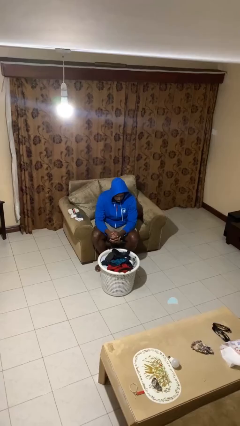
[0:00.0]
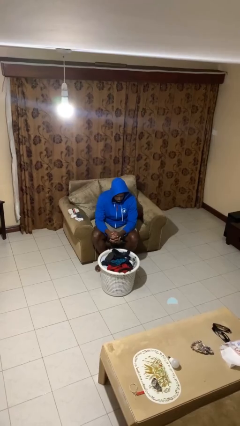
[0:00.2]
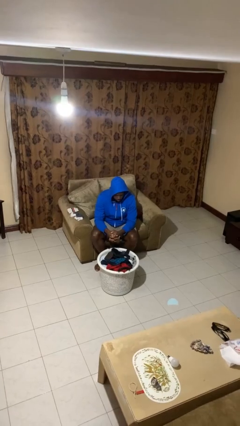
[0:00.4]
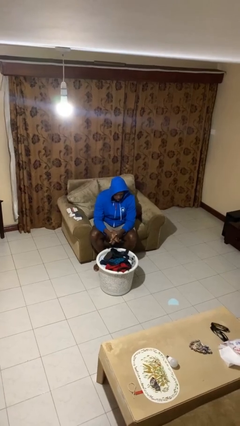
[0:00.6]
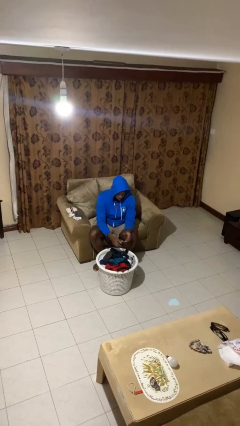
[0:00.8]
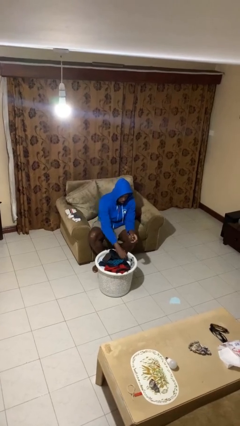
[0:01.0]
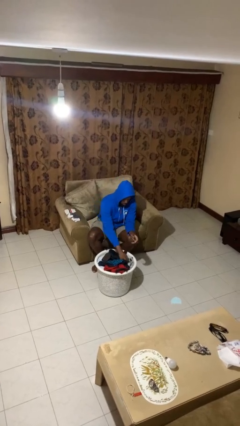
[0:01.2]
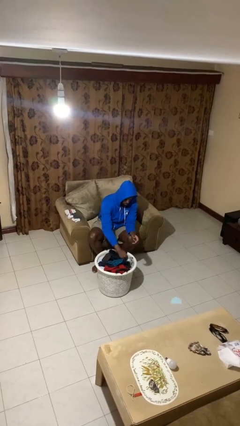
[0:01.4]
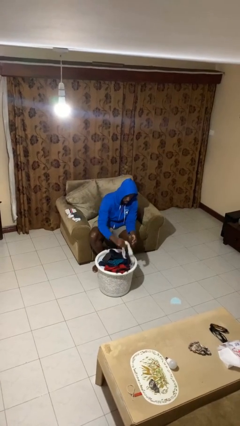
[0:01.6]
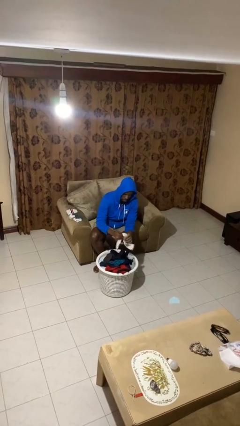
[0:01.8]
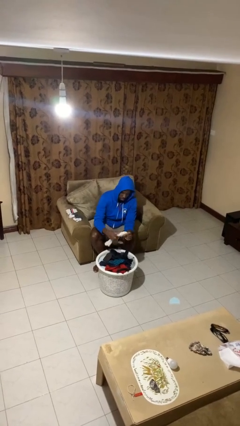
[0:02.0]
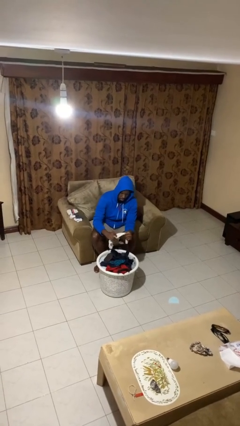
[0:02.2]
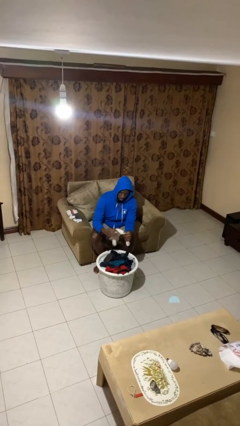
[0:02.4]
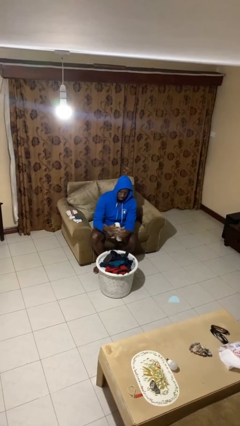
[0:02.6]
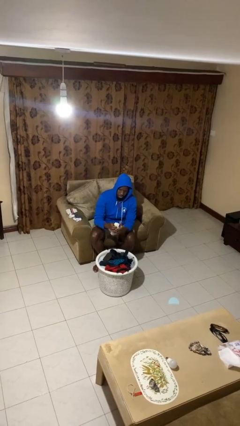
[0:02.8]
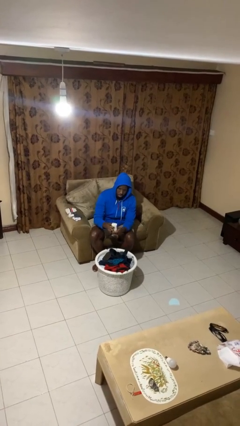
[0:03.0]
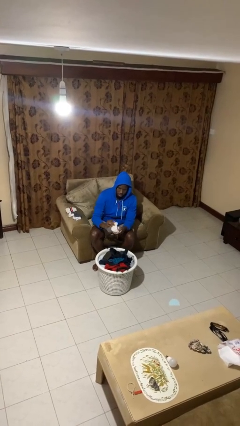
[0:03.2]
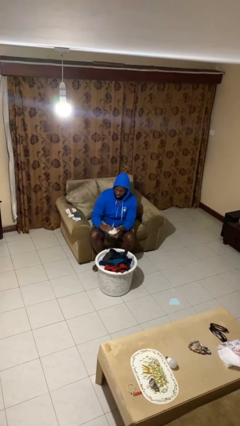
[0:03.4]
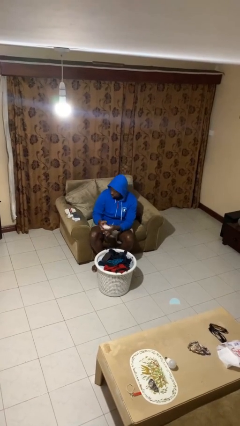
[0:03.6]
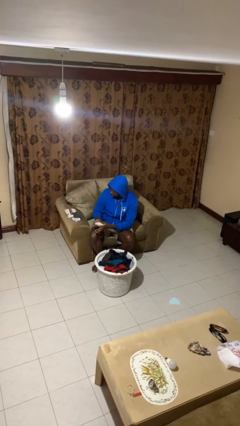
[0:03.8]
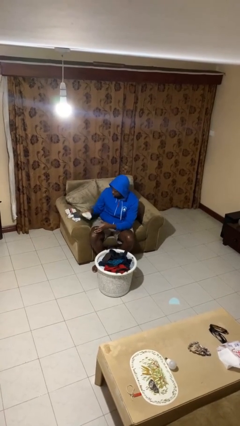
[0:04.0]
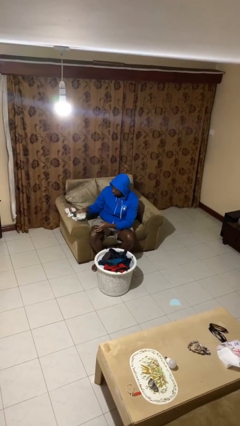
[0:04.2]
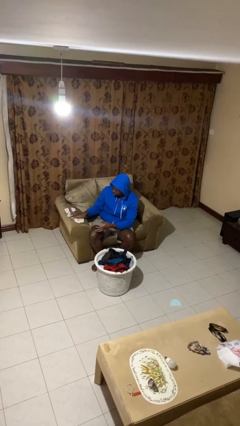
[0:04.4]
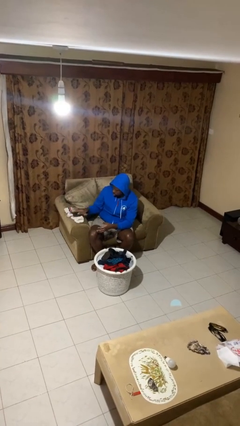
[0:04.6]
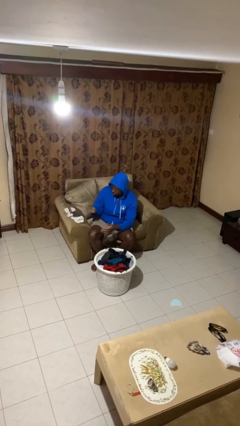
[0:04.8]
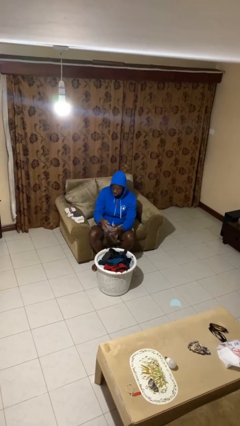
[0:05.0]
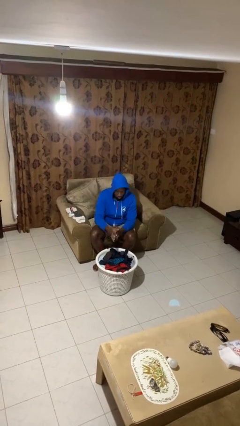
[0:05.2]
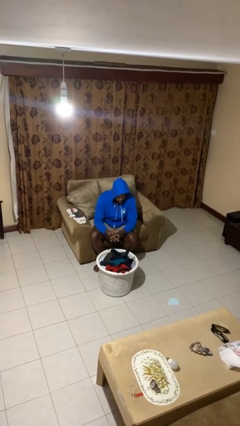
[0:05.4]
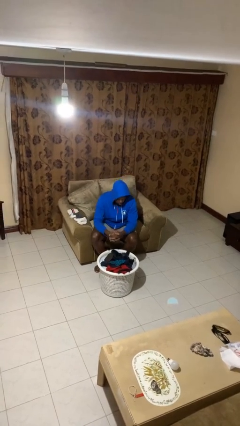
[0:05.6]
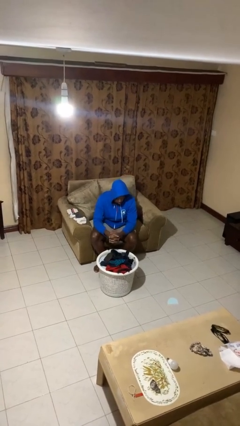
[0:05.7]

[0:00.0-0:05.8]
person folds socks

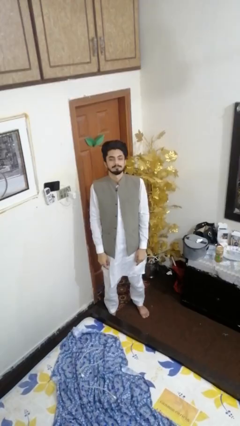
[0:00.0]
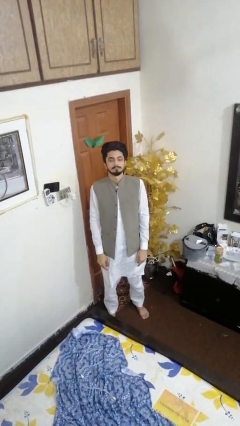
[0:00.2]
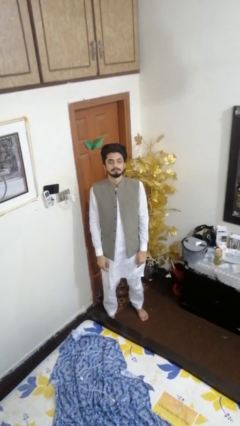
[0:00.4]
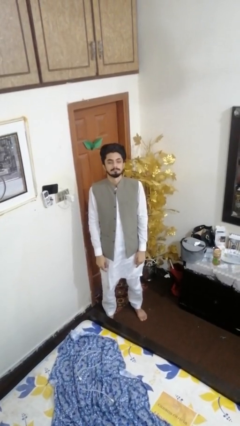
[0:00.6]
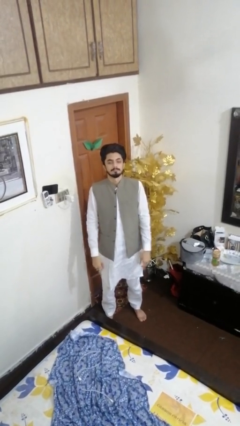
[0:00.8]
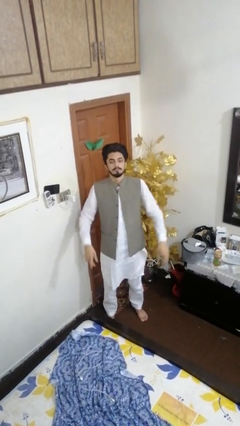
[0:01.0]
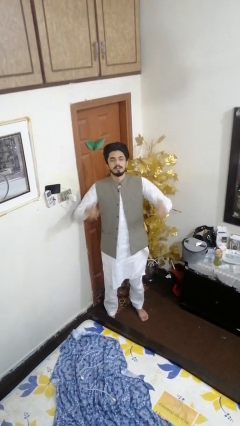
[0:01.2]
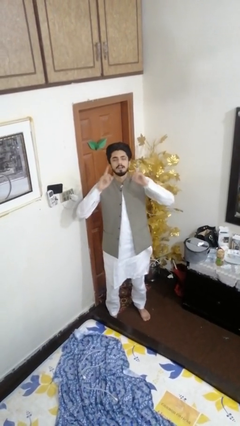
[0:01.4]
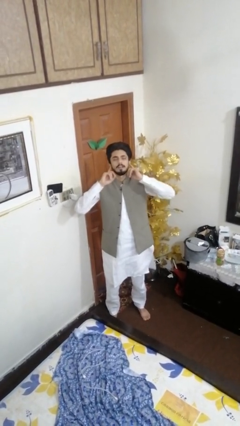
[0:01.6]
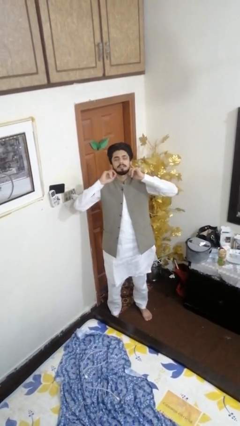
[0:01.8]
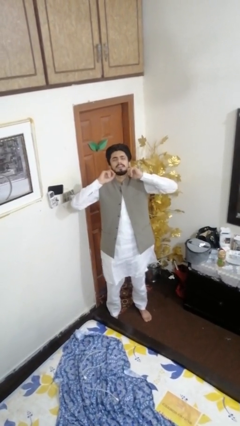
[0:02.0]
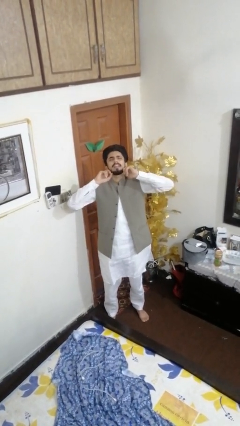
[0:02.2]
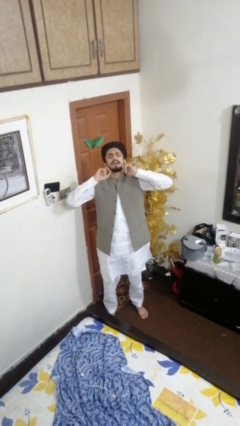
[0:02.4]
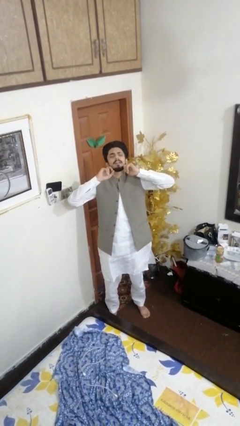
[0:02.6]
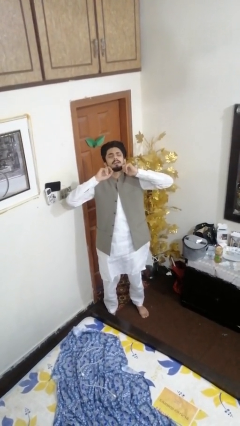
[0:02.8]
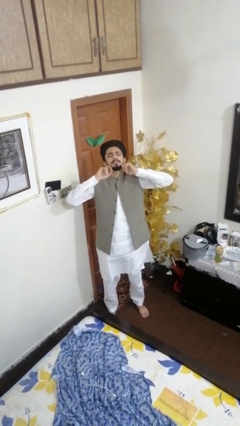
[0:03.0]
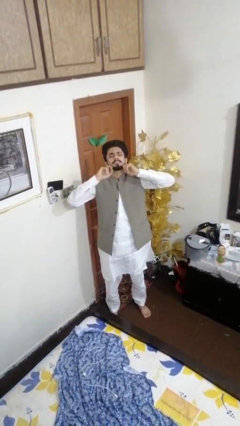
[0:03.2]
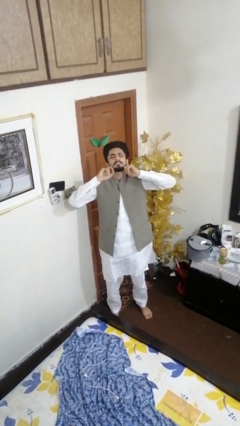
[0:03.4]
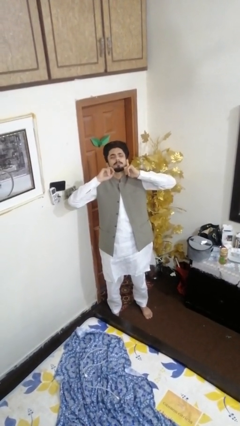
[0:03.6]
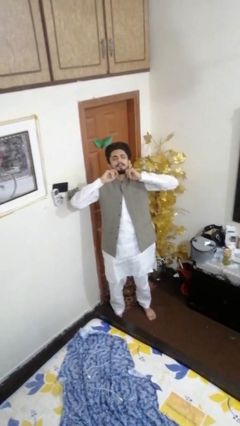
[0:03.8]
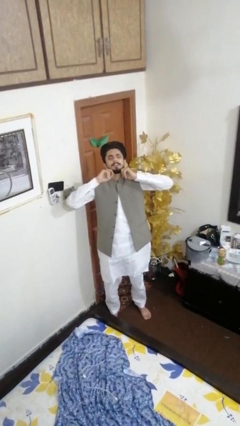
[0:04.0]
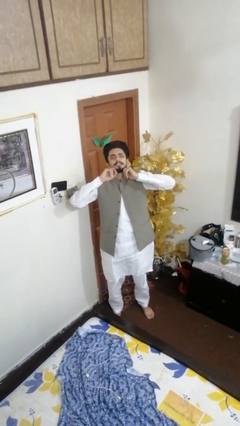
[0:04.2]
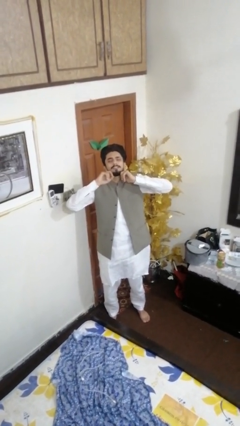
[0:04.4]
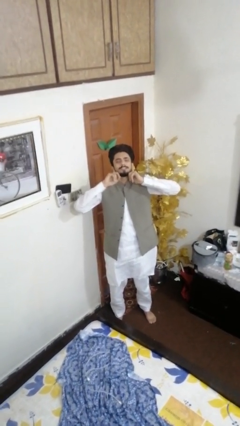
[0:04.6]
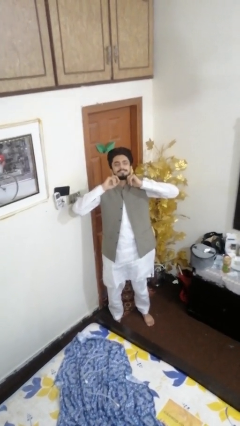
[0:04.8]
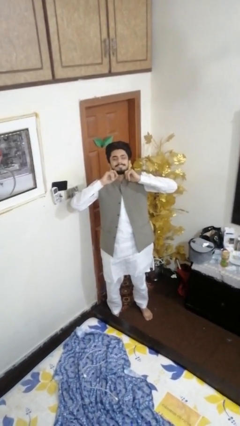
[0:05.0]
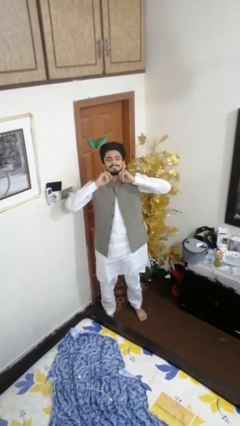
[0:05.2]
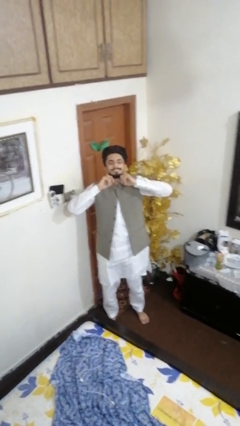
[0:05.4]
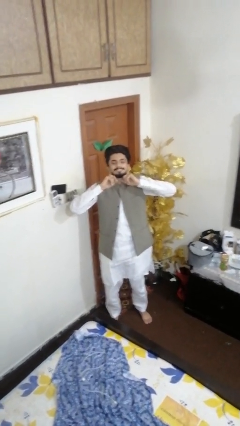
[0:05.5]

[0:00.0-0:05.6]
person puts fingers in ear

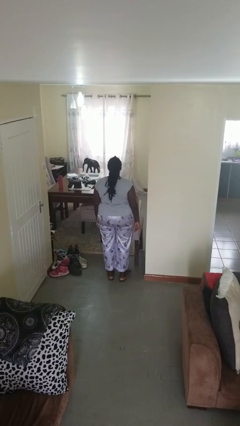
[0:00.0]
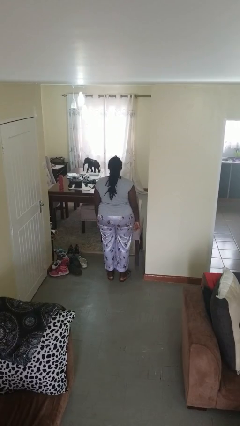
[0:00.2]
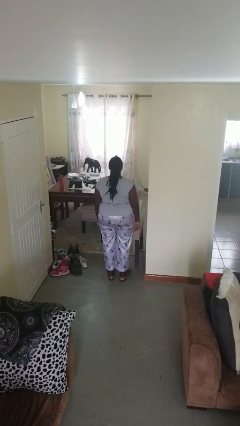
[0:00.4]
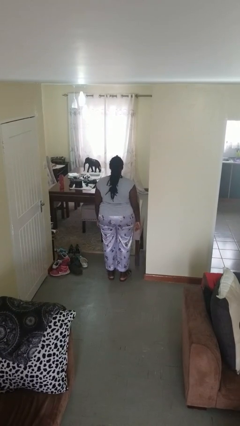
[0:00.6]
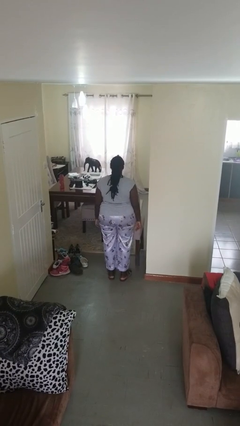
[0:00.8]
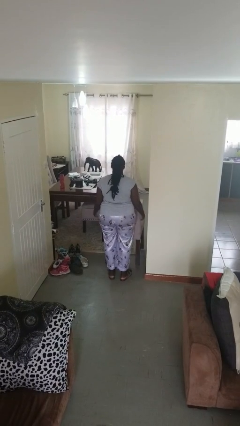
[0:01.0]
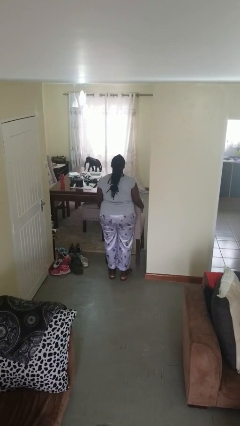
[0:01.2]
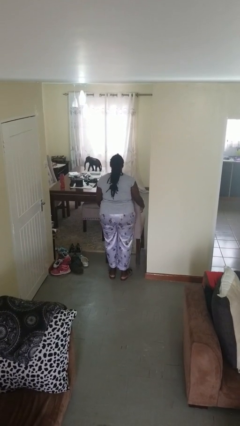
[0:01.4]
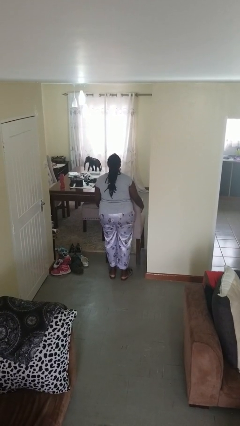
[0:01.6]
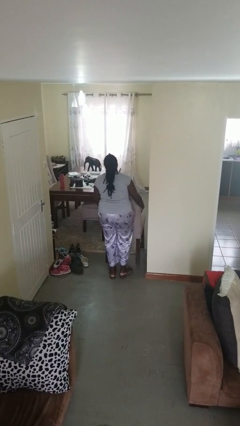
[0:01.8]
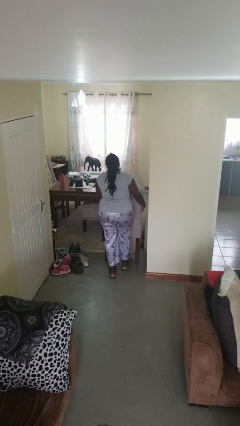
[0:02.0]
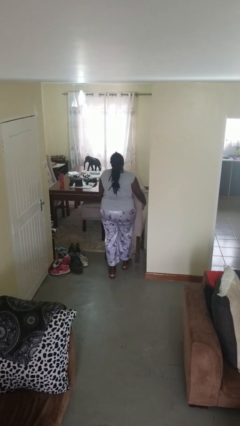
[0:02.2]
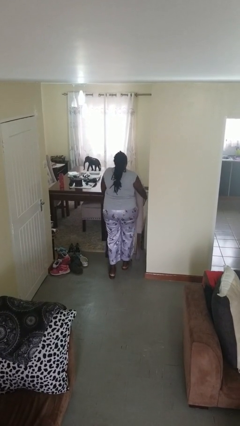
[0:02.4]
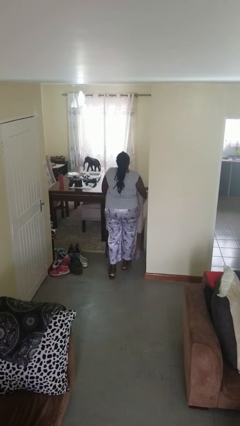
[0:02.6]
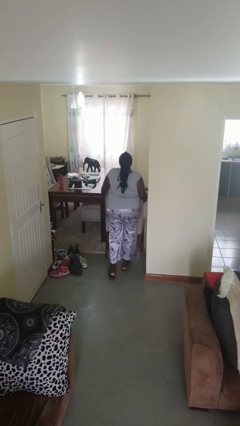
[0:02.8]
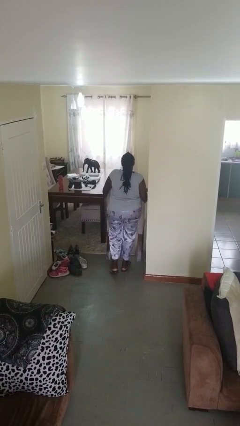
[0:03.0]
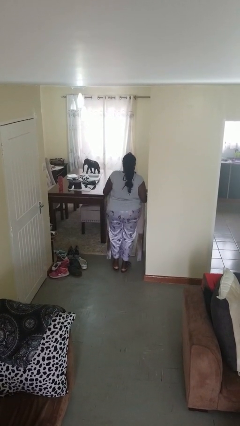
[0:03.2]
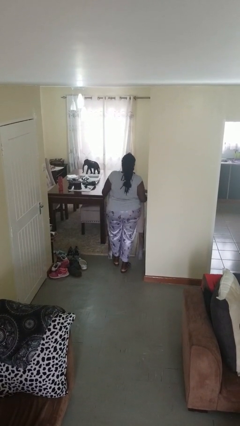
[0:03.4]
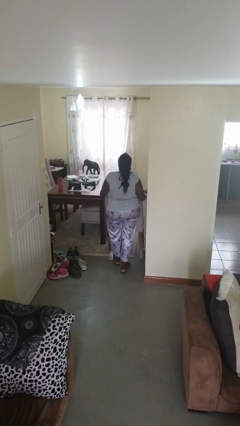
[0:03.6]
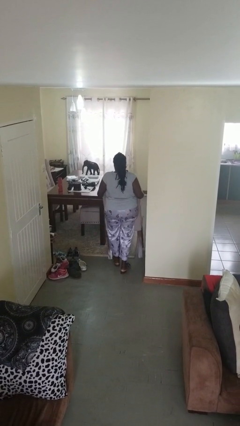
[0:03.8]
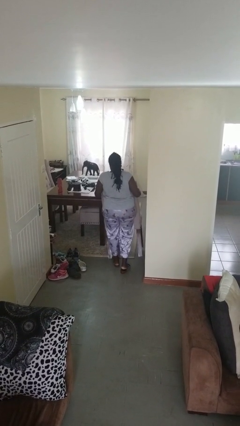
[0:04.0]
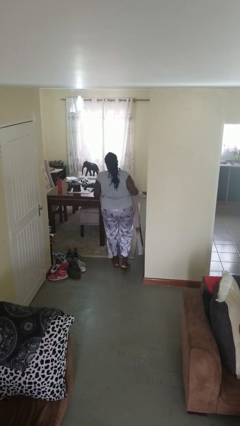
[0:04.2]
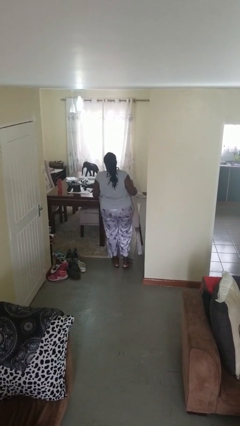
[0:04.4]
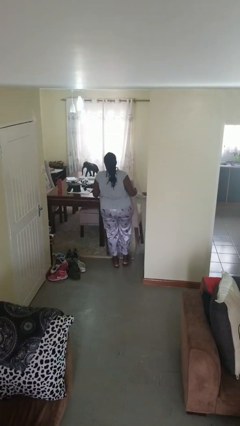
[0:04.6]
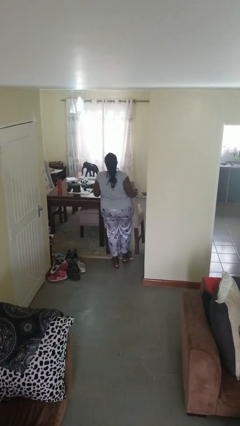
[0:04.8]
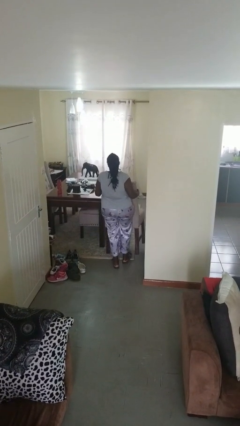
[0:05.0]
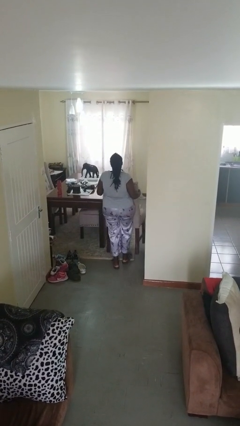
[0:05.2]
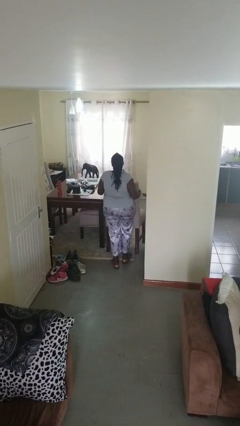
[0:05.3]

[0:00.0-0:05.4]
person carries furniture

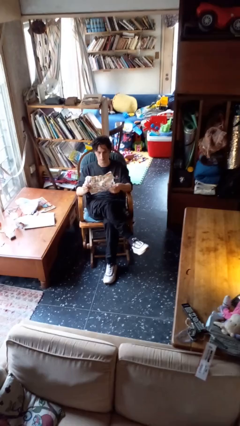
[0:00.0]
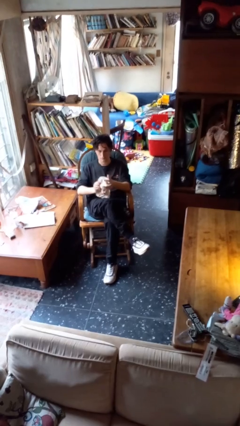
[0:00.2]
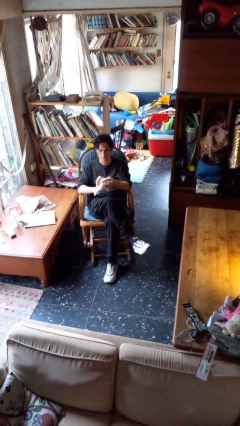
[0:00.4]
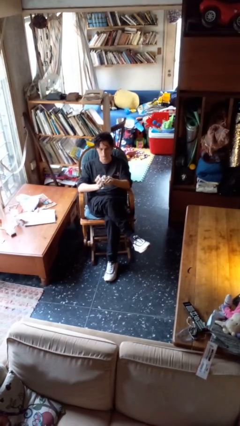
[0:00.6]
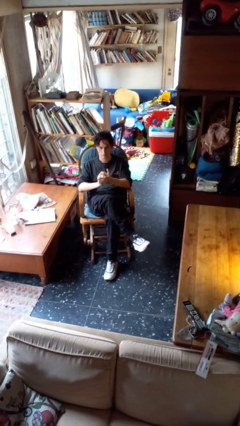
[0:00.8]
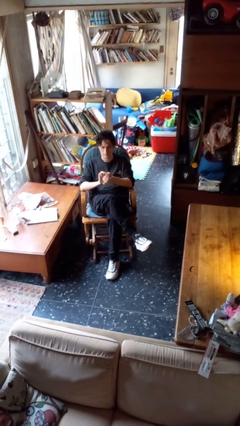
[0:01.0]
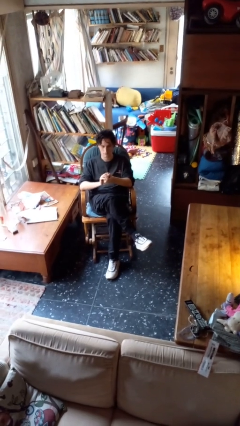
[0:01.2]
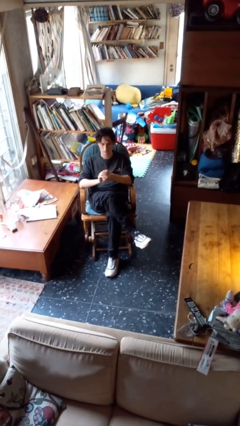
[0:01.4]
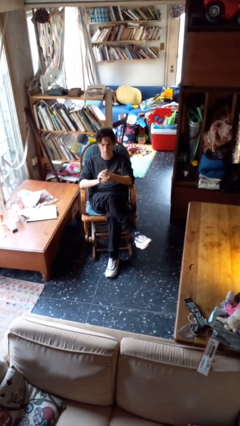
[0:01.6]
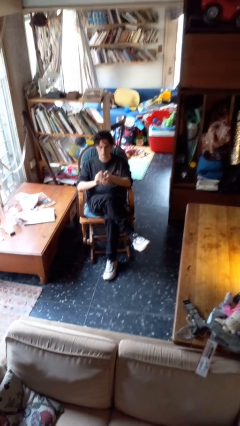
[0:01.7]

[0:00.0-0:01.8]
person crumples paper
